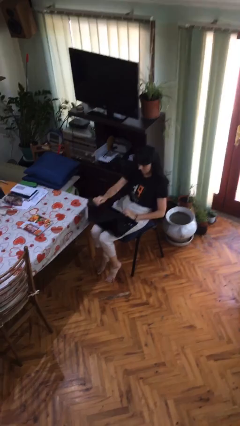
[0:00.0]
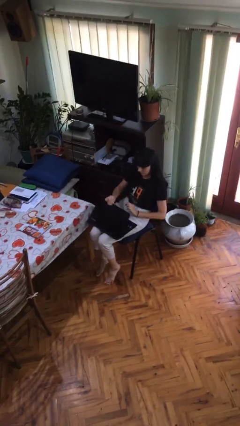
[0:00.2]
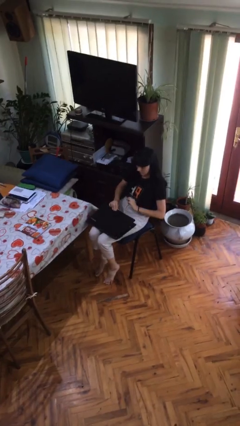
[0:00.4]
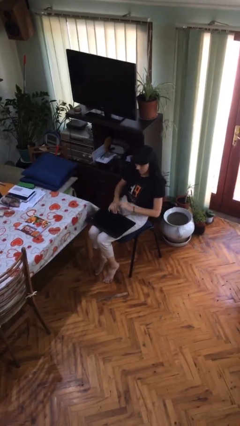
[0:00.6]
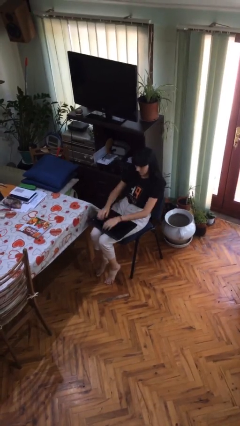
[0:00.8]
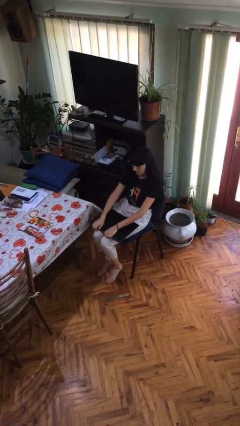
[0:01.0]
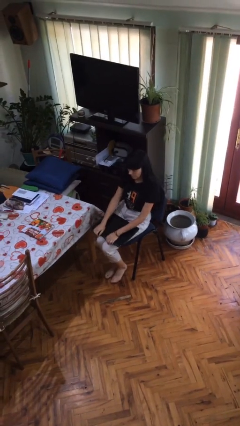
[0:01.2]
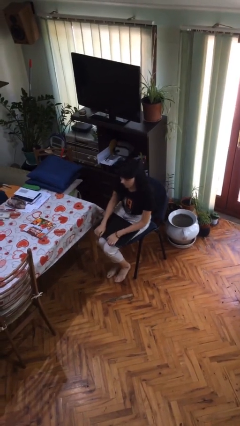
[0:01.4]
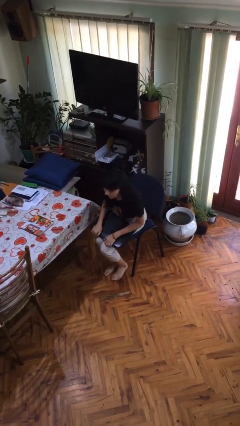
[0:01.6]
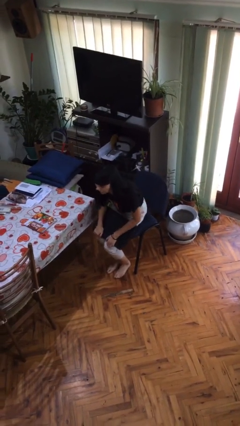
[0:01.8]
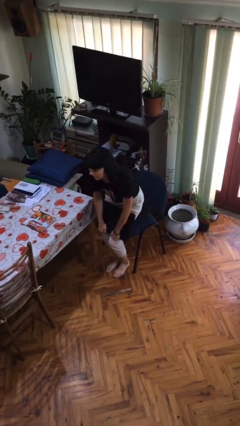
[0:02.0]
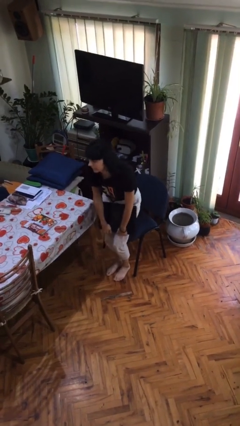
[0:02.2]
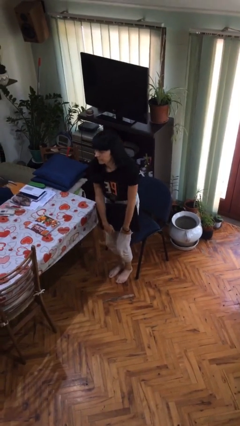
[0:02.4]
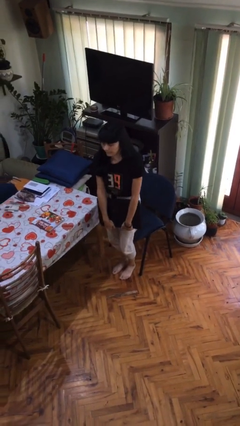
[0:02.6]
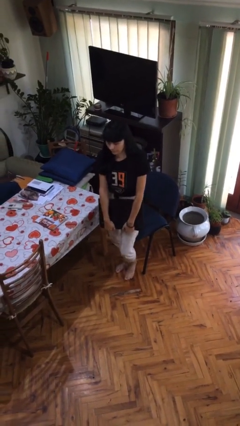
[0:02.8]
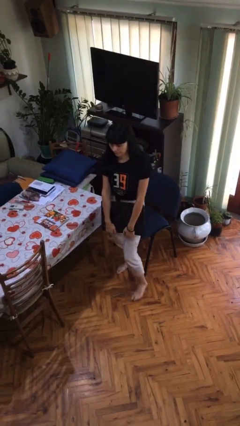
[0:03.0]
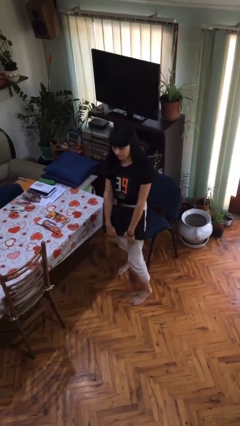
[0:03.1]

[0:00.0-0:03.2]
person stands up

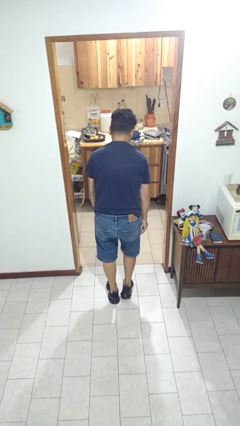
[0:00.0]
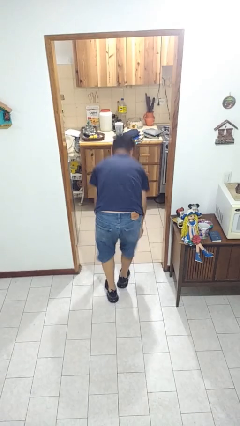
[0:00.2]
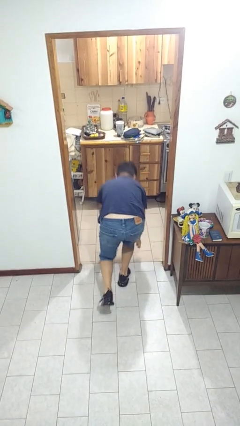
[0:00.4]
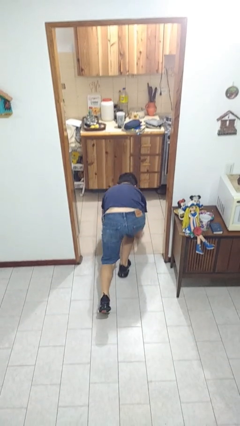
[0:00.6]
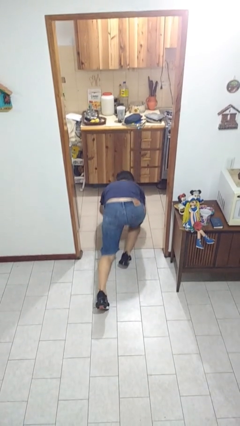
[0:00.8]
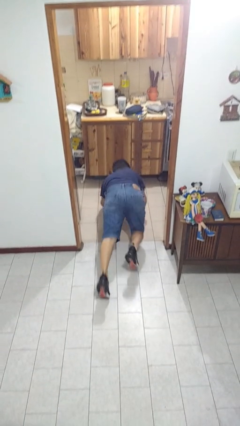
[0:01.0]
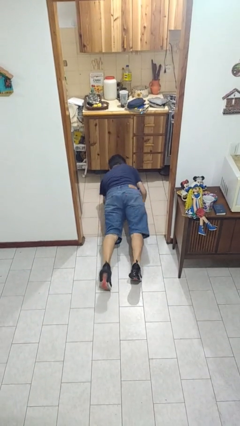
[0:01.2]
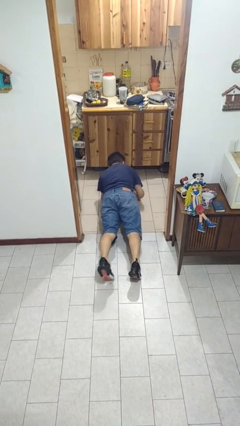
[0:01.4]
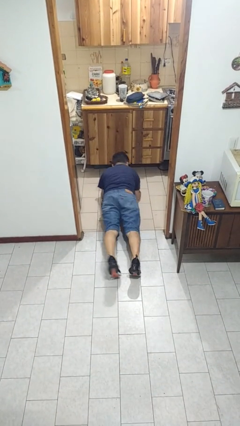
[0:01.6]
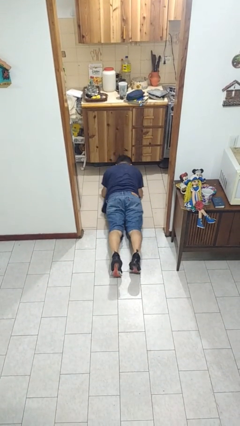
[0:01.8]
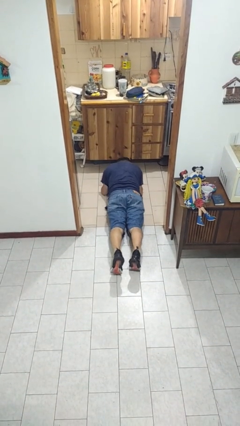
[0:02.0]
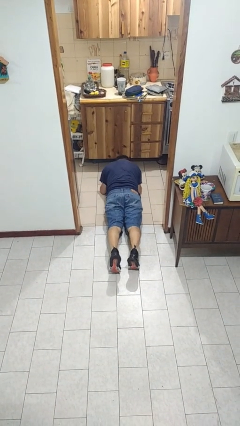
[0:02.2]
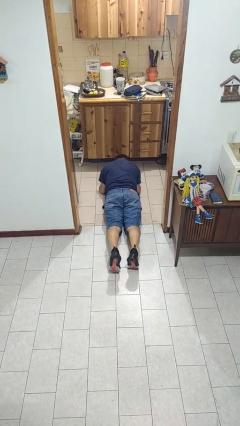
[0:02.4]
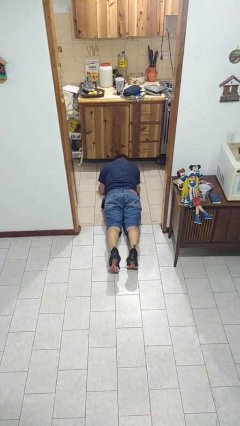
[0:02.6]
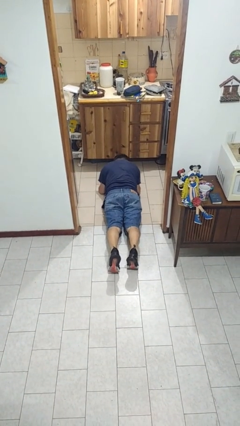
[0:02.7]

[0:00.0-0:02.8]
person exercises with plank

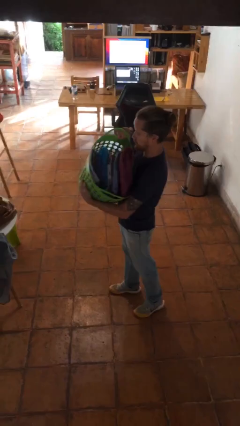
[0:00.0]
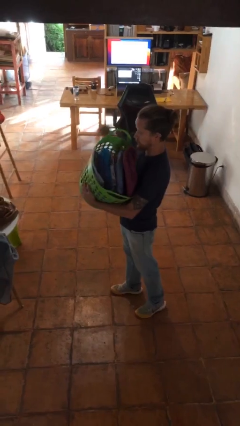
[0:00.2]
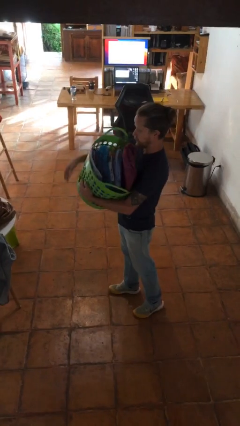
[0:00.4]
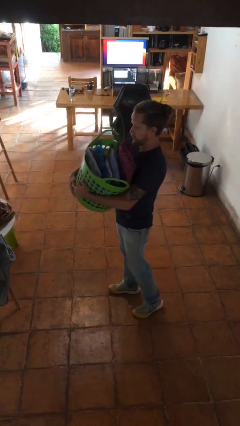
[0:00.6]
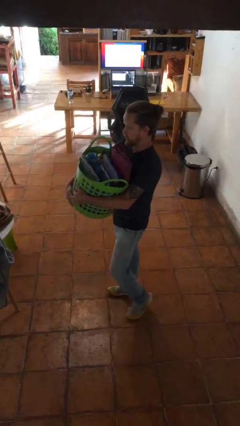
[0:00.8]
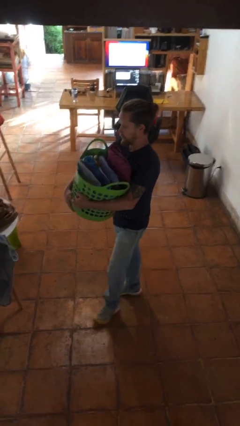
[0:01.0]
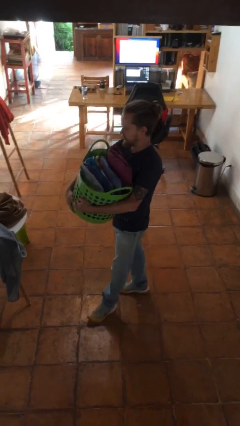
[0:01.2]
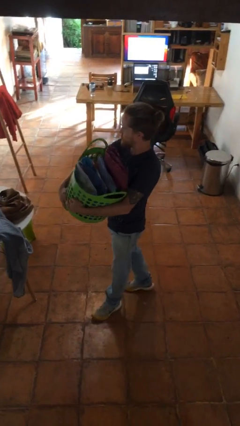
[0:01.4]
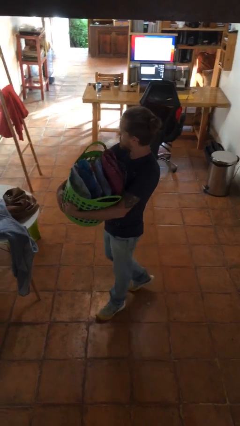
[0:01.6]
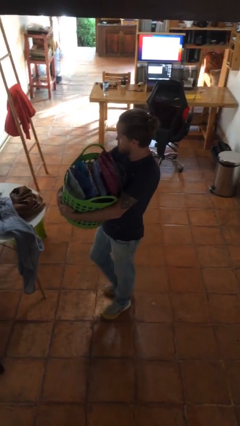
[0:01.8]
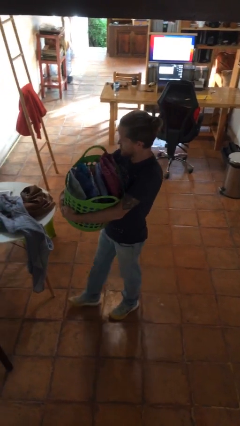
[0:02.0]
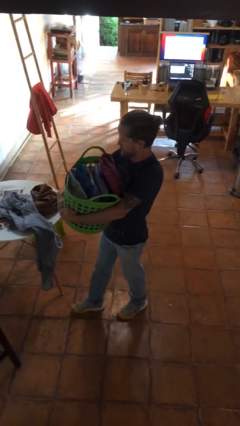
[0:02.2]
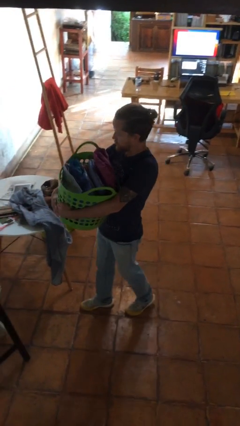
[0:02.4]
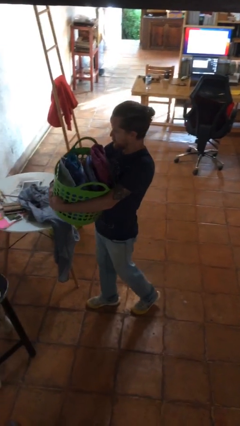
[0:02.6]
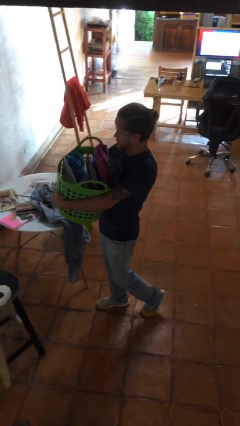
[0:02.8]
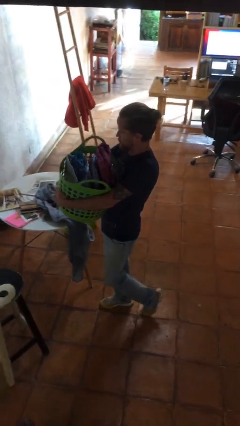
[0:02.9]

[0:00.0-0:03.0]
person carries laundry basket

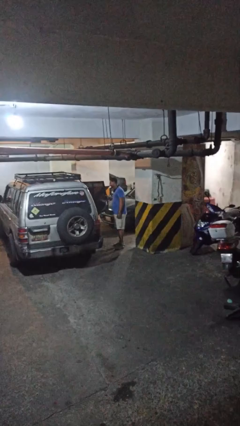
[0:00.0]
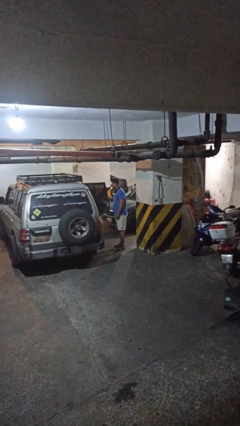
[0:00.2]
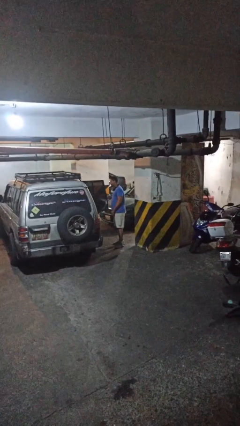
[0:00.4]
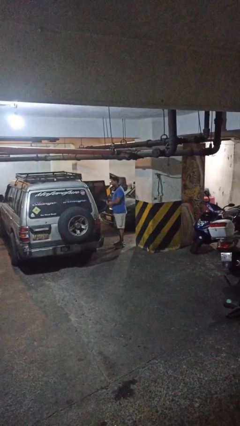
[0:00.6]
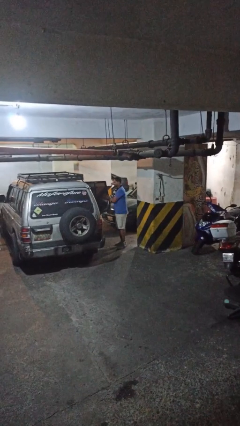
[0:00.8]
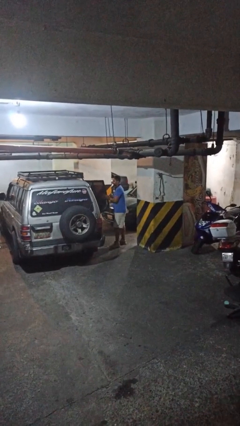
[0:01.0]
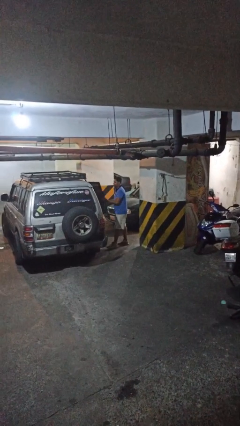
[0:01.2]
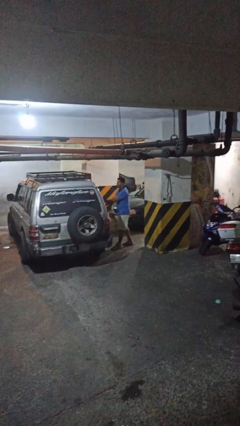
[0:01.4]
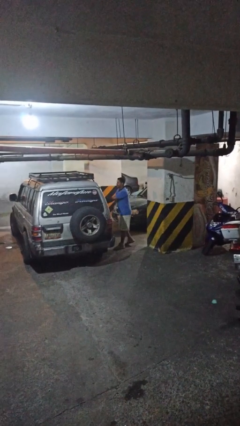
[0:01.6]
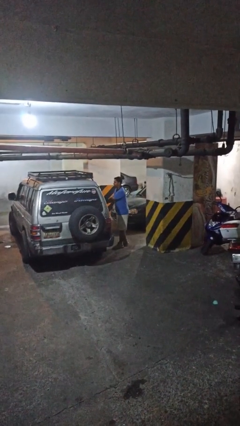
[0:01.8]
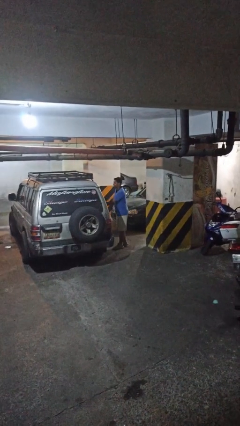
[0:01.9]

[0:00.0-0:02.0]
person closes car door

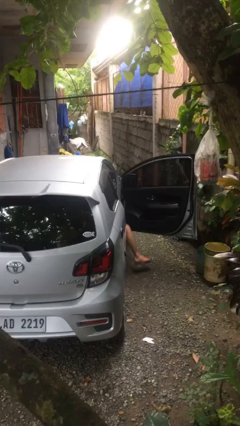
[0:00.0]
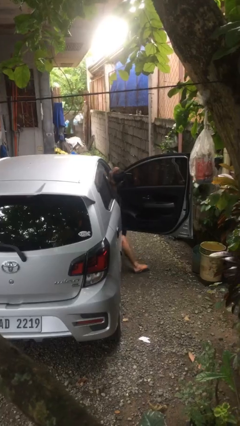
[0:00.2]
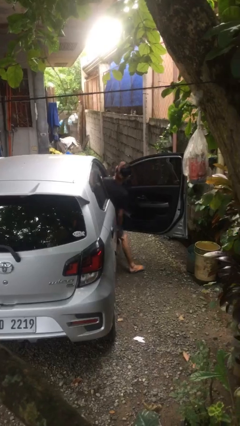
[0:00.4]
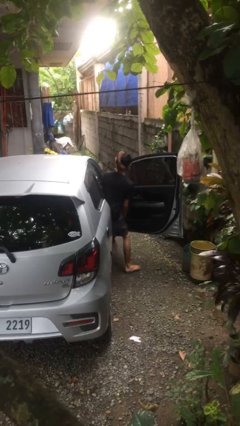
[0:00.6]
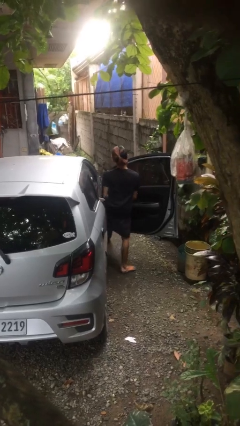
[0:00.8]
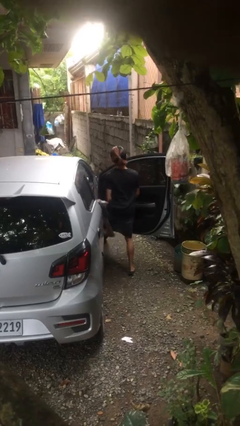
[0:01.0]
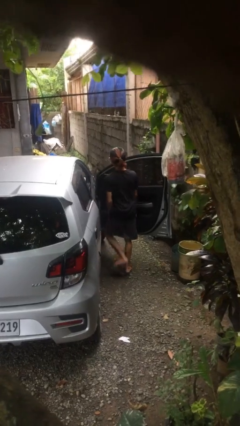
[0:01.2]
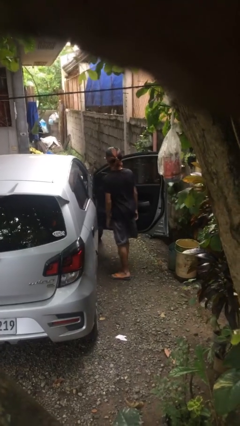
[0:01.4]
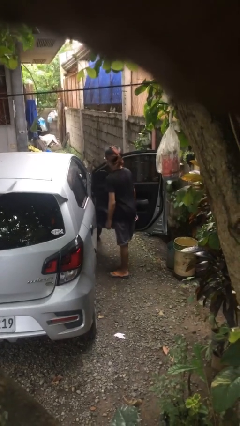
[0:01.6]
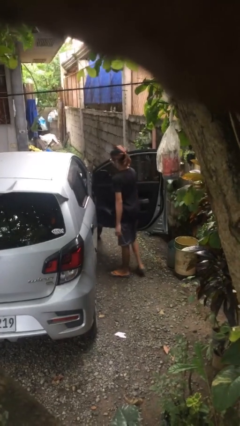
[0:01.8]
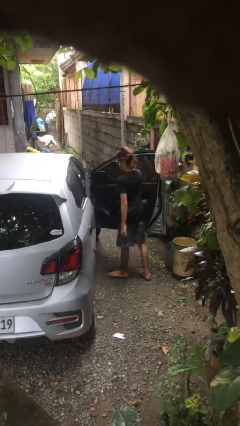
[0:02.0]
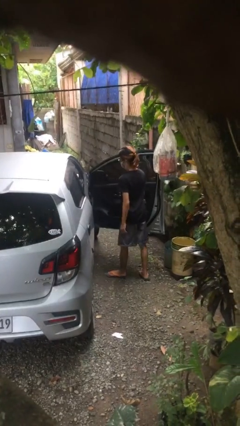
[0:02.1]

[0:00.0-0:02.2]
person exits car

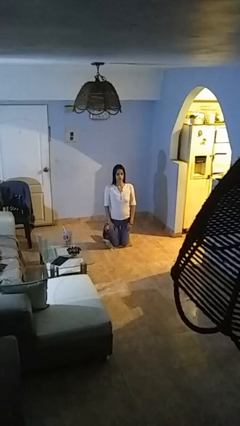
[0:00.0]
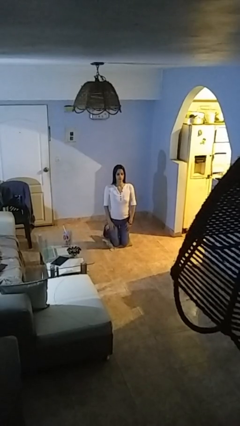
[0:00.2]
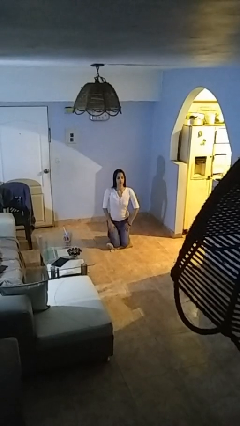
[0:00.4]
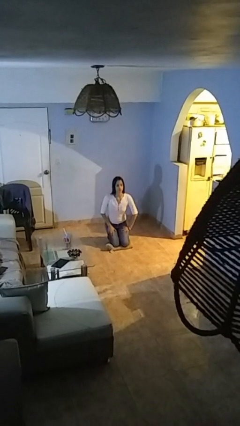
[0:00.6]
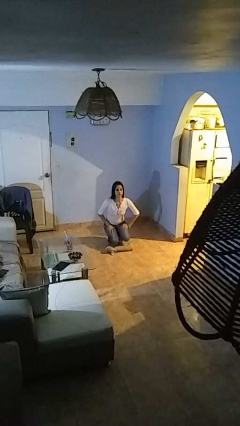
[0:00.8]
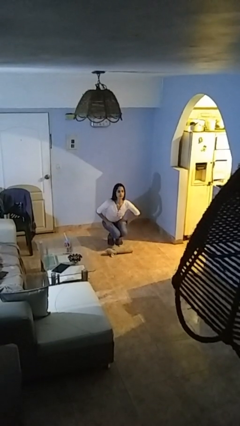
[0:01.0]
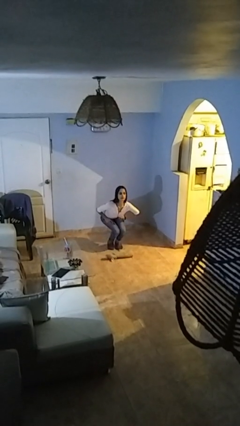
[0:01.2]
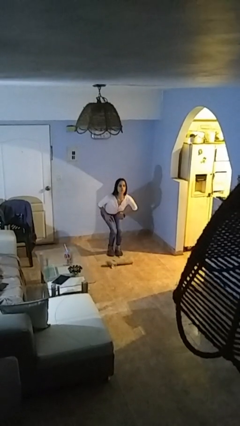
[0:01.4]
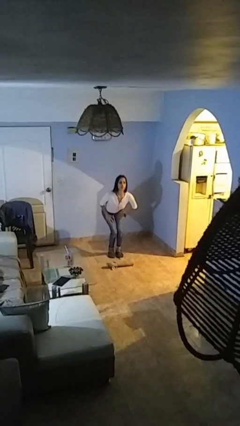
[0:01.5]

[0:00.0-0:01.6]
person stands up from floor

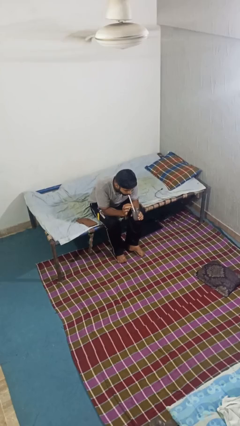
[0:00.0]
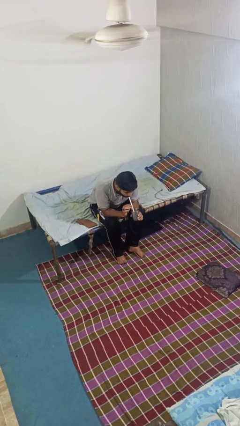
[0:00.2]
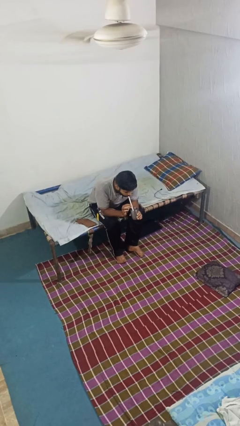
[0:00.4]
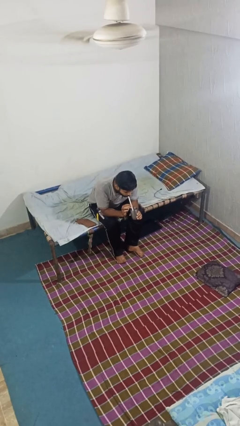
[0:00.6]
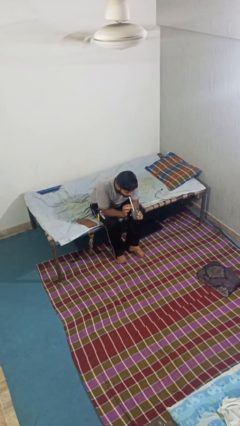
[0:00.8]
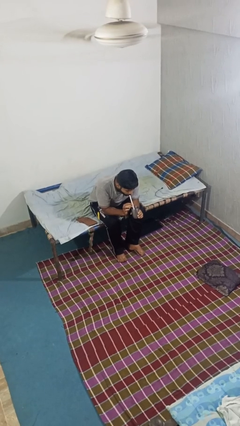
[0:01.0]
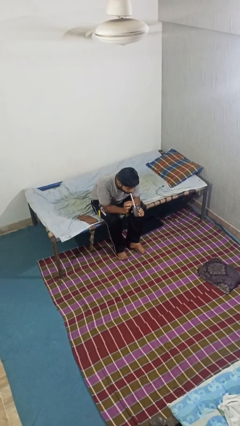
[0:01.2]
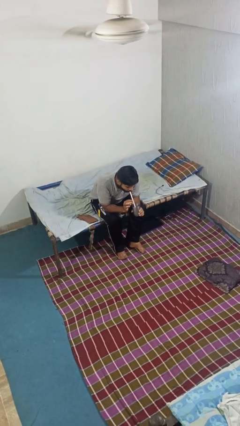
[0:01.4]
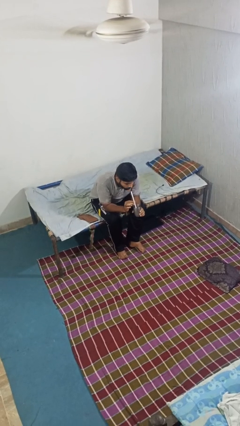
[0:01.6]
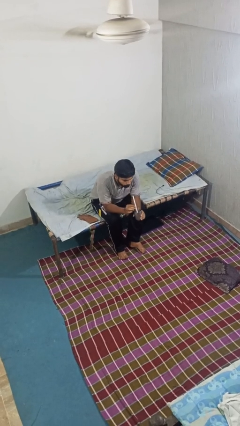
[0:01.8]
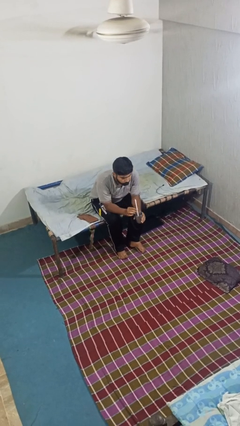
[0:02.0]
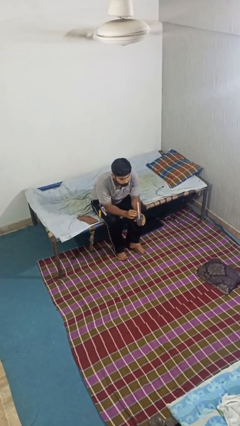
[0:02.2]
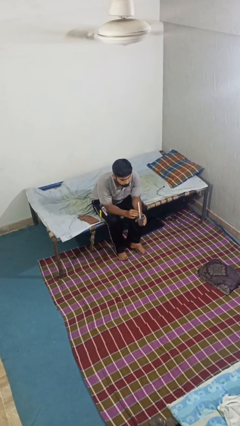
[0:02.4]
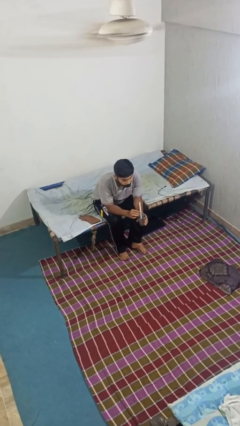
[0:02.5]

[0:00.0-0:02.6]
person drinks from straw
